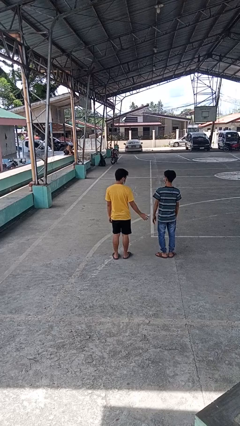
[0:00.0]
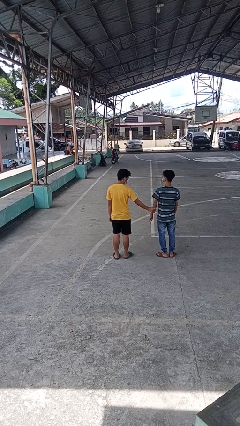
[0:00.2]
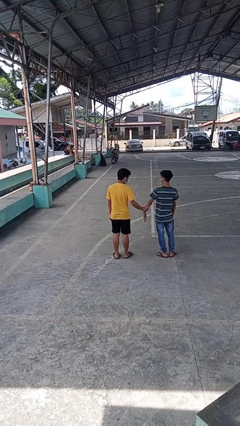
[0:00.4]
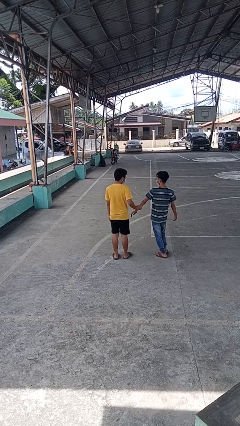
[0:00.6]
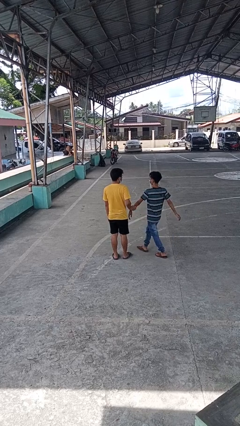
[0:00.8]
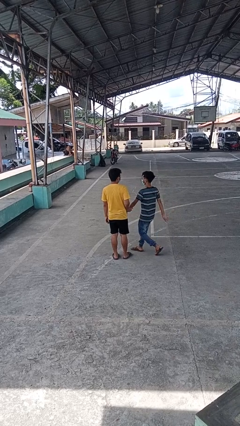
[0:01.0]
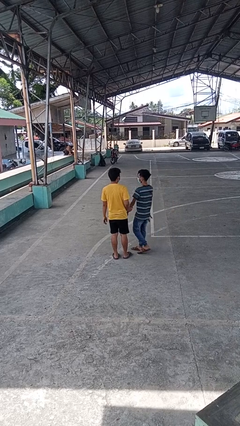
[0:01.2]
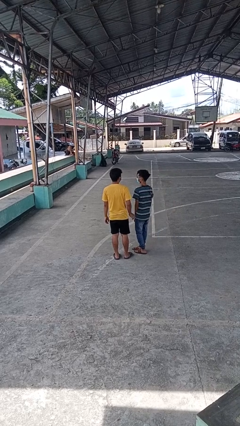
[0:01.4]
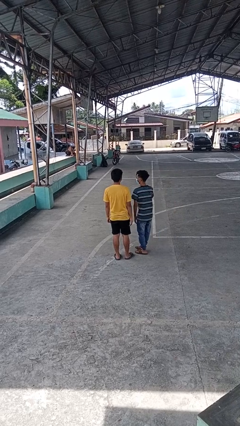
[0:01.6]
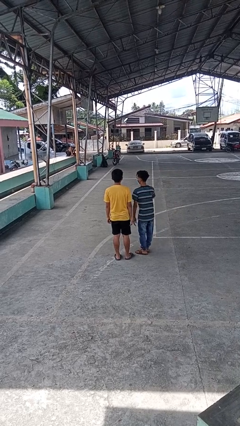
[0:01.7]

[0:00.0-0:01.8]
person grabs person by forearm

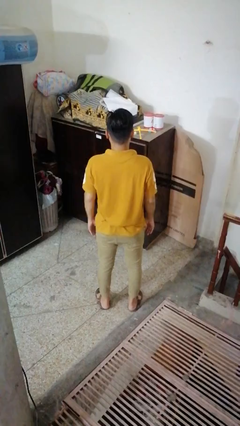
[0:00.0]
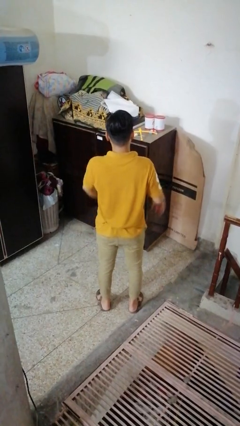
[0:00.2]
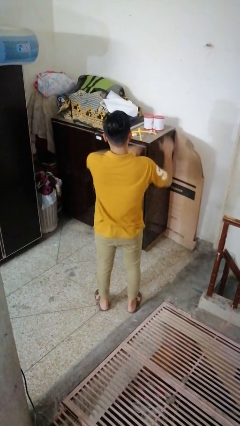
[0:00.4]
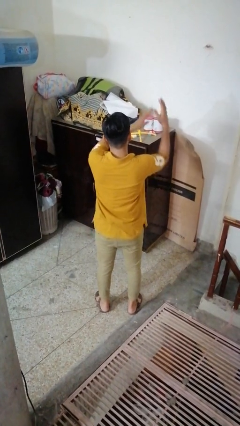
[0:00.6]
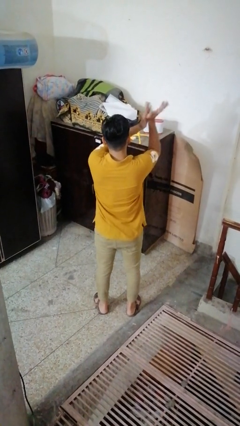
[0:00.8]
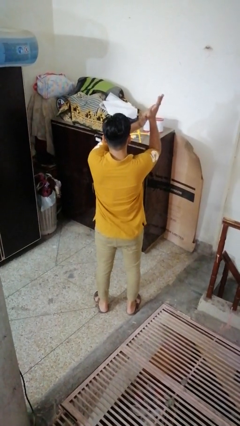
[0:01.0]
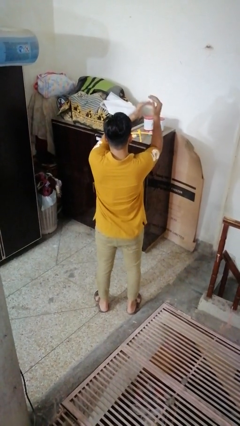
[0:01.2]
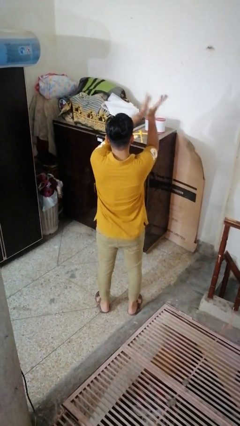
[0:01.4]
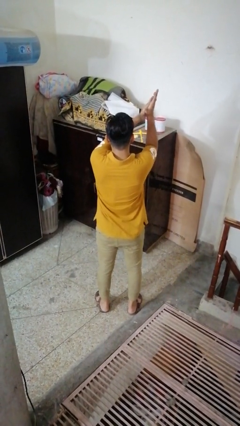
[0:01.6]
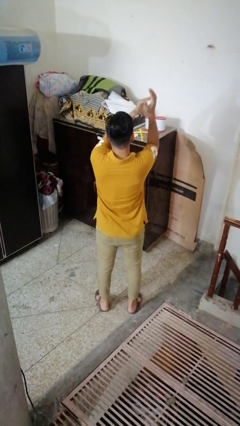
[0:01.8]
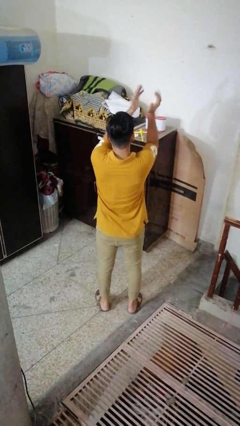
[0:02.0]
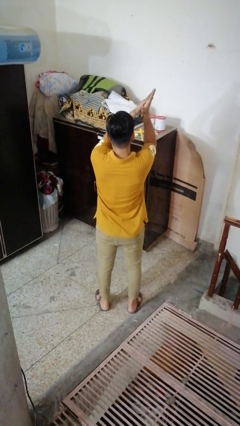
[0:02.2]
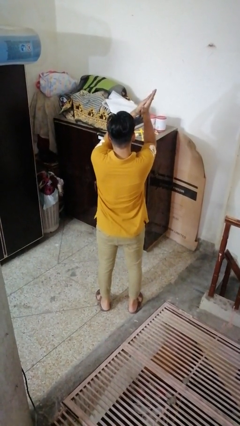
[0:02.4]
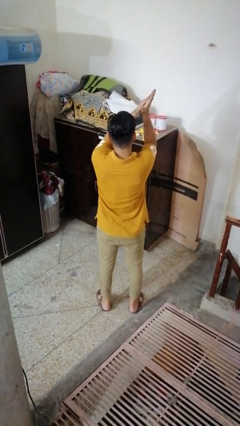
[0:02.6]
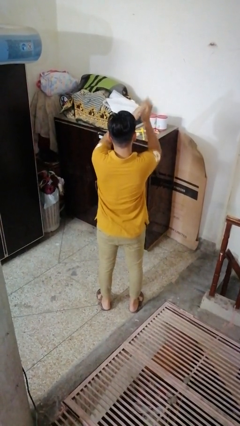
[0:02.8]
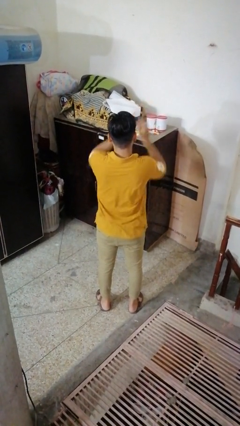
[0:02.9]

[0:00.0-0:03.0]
person claps hands

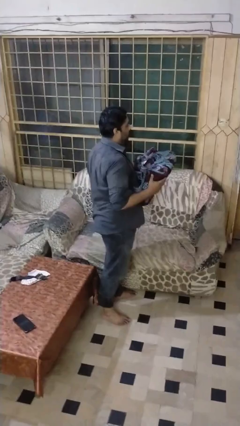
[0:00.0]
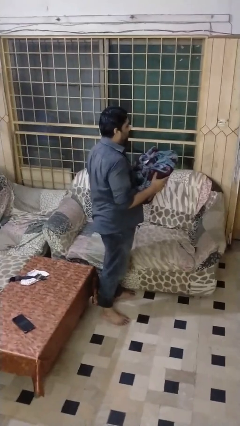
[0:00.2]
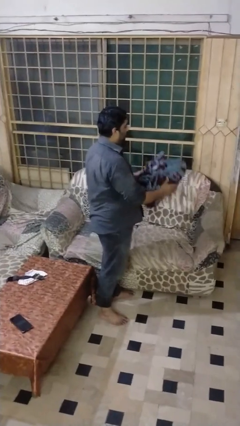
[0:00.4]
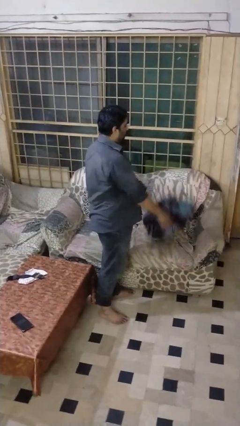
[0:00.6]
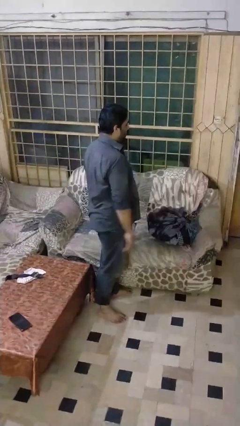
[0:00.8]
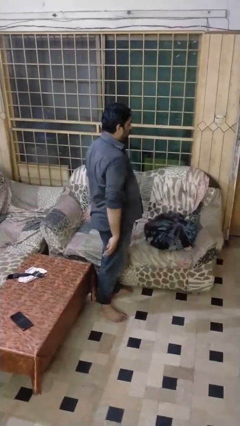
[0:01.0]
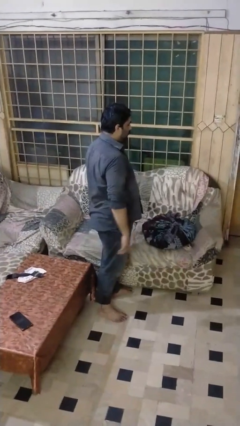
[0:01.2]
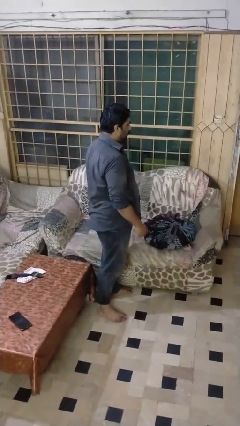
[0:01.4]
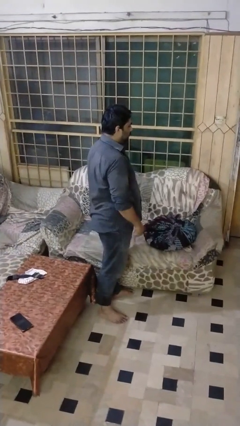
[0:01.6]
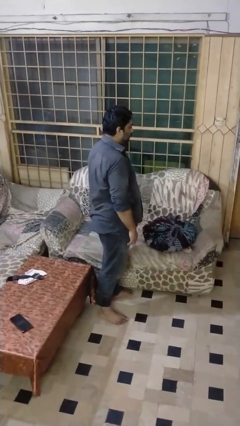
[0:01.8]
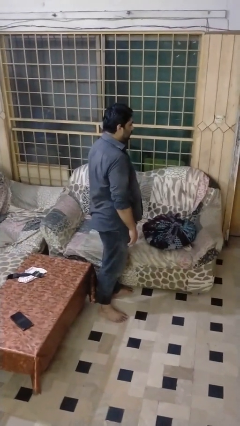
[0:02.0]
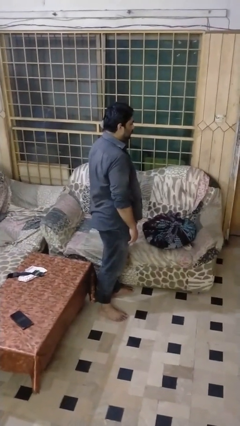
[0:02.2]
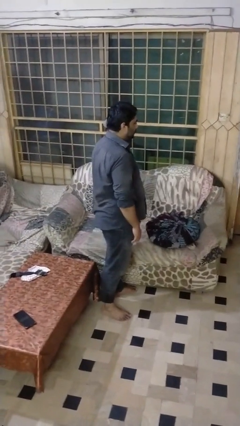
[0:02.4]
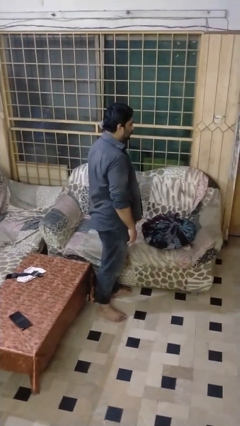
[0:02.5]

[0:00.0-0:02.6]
person puts down object on couch

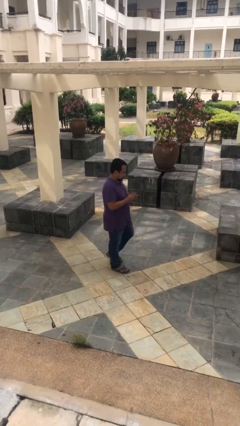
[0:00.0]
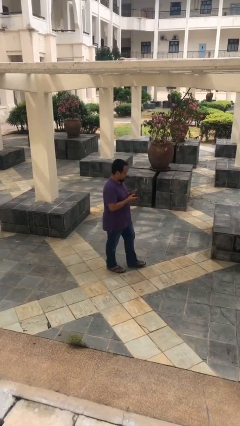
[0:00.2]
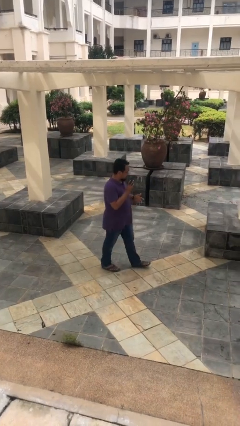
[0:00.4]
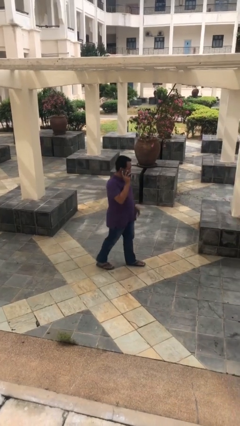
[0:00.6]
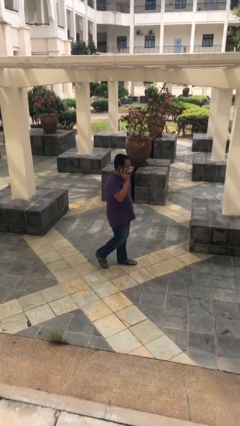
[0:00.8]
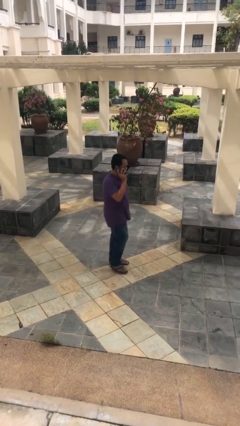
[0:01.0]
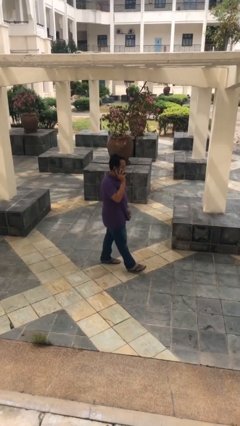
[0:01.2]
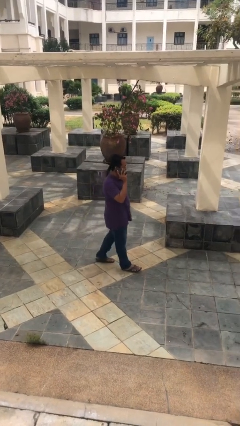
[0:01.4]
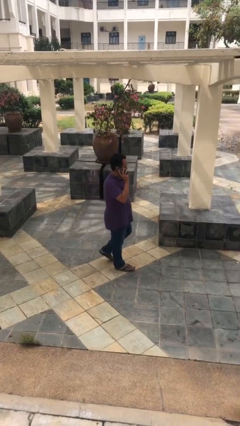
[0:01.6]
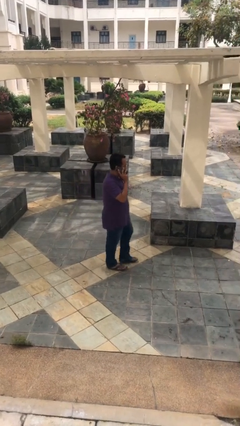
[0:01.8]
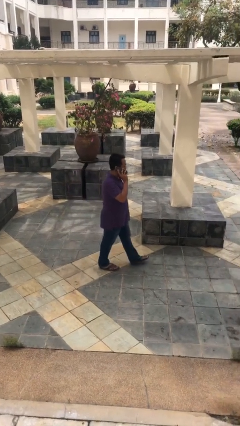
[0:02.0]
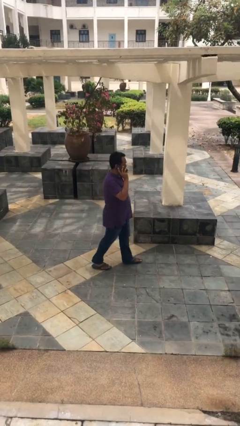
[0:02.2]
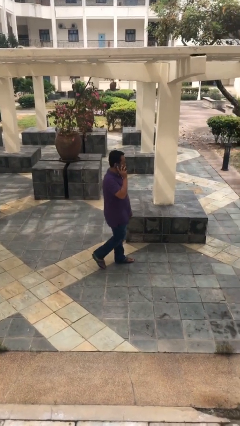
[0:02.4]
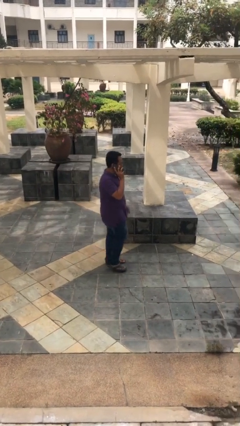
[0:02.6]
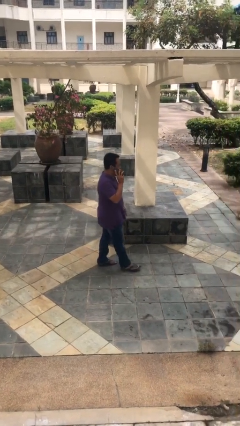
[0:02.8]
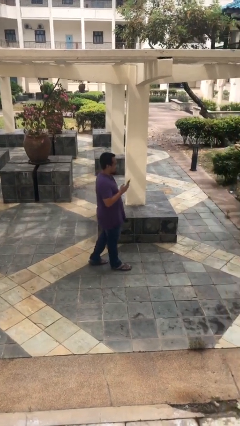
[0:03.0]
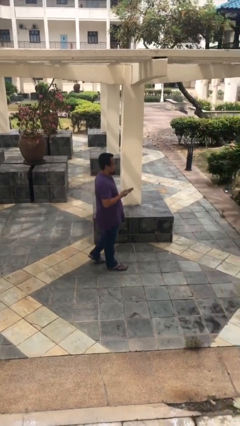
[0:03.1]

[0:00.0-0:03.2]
person talks on phone

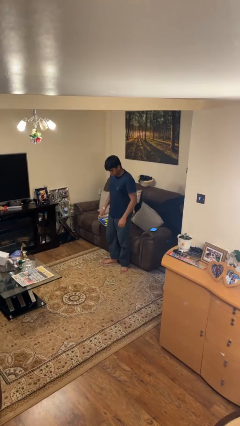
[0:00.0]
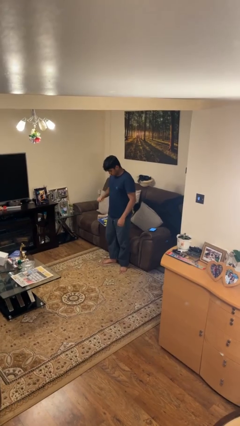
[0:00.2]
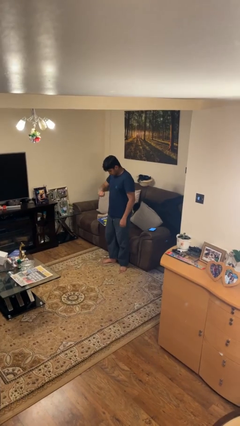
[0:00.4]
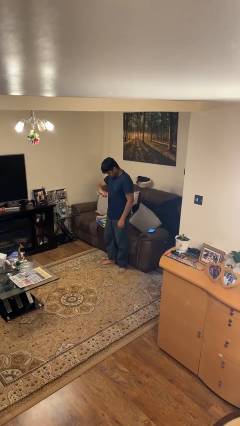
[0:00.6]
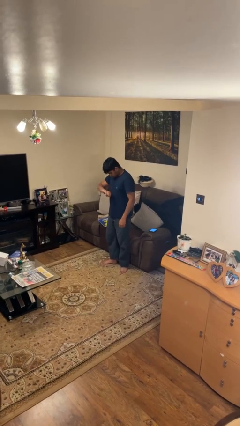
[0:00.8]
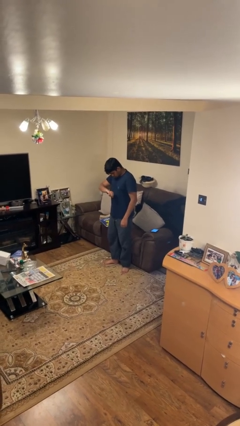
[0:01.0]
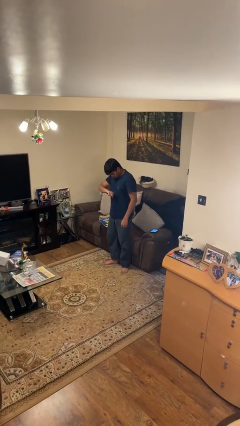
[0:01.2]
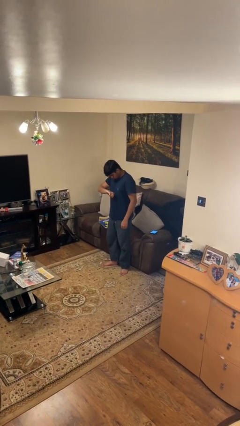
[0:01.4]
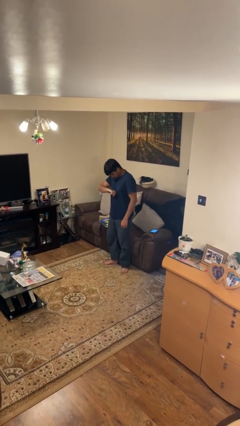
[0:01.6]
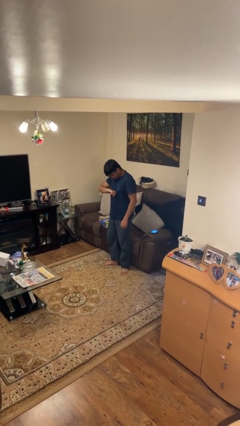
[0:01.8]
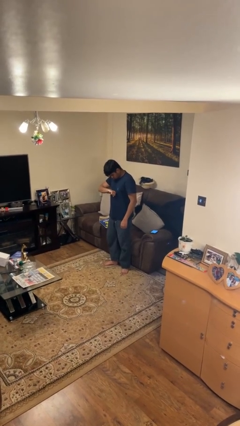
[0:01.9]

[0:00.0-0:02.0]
person looks at wristwatch

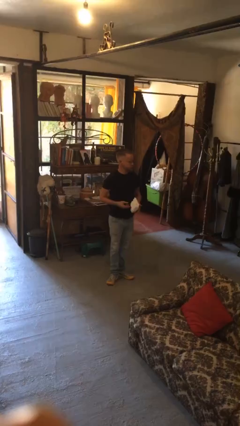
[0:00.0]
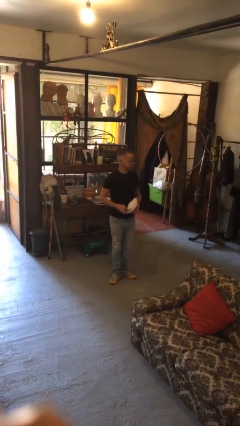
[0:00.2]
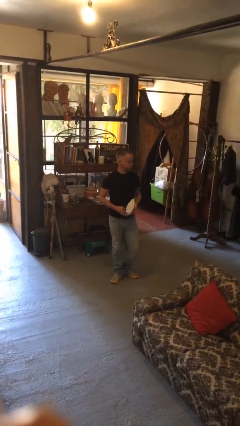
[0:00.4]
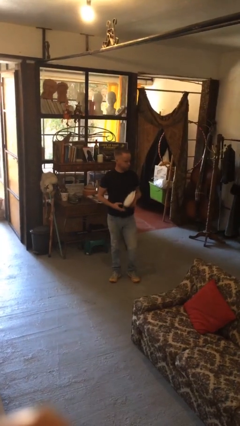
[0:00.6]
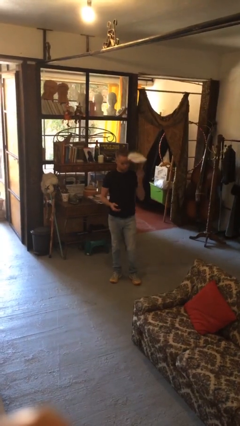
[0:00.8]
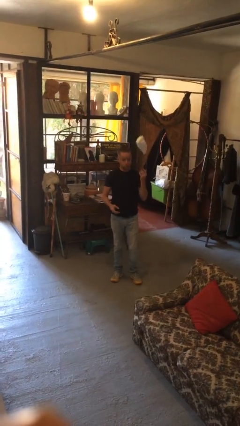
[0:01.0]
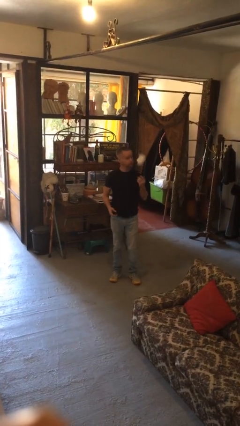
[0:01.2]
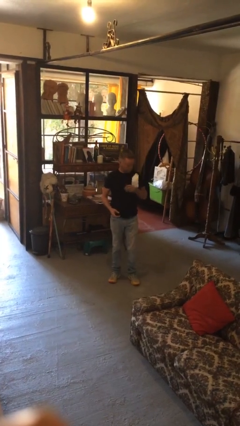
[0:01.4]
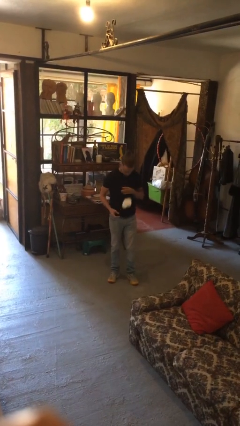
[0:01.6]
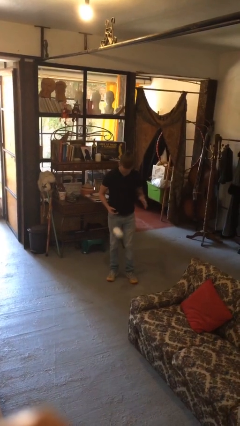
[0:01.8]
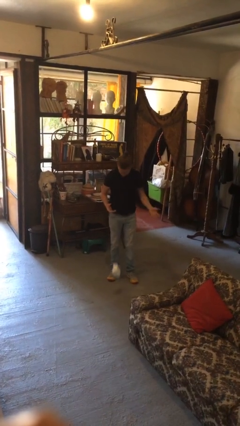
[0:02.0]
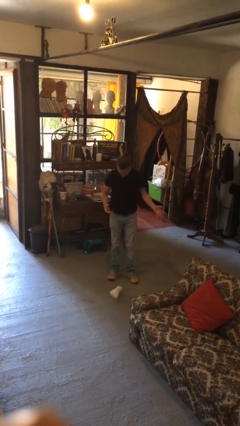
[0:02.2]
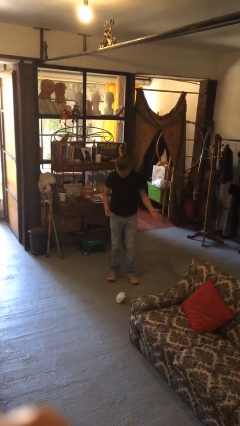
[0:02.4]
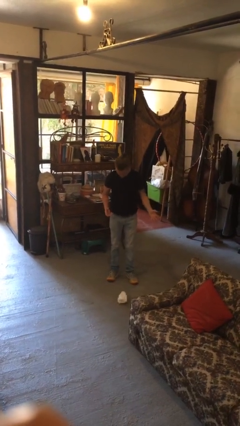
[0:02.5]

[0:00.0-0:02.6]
person drops object

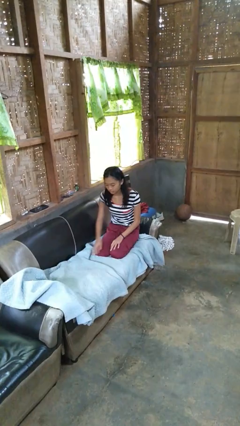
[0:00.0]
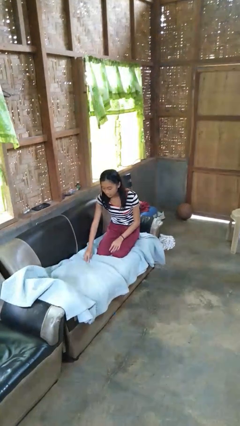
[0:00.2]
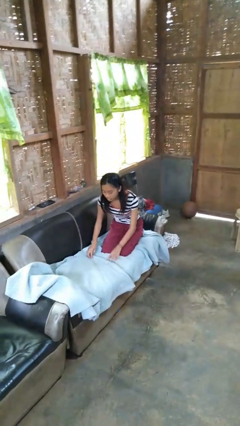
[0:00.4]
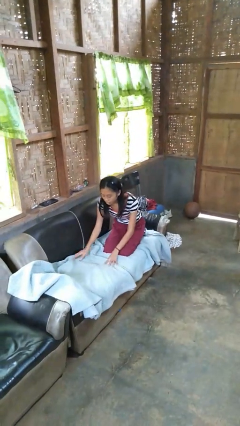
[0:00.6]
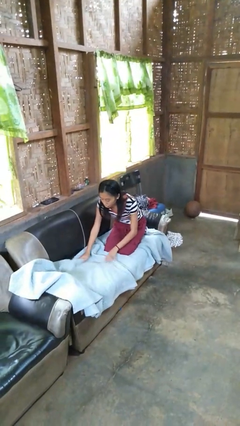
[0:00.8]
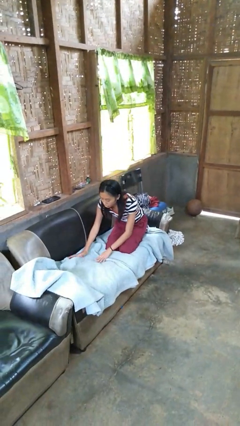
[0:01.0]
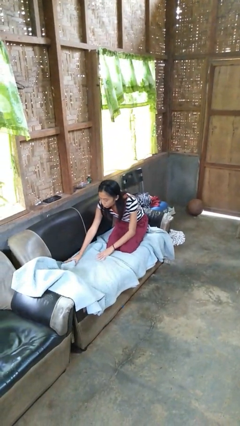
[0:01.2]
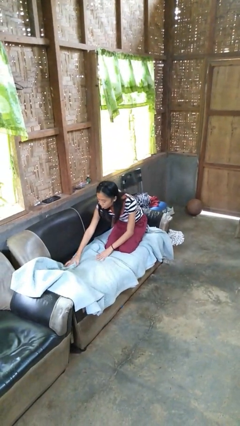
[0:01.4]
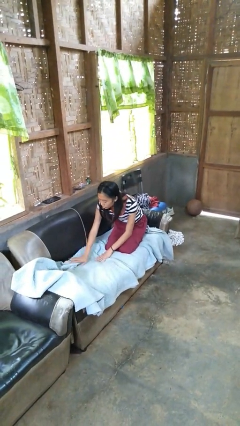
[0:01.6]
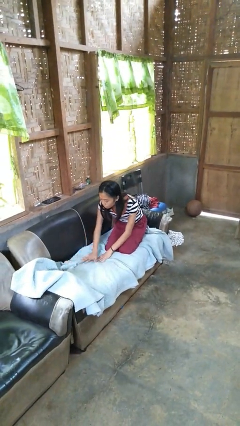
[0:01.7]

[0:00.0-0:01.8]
person searches in couch
